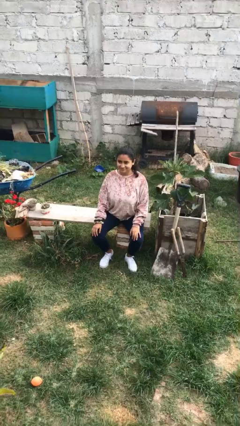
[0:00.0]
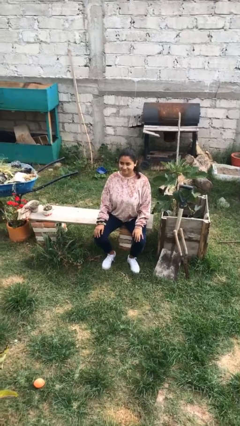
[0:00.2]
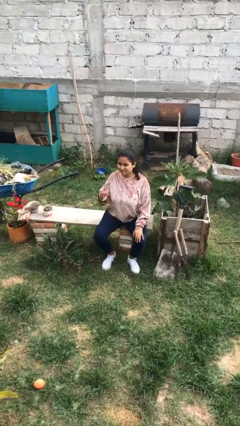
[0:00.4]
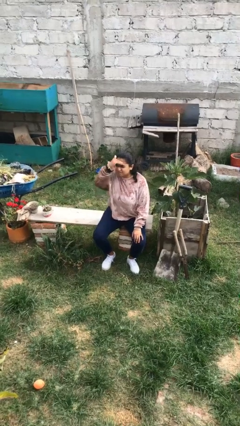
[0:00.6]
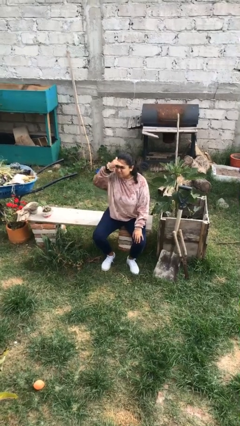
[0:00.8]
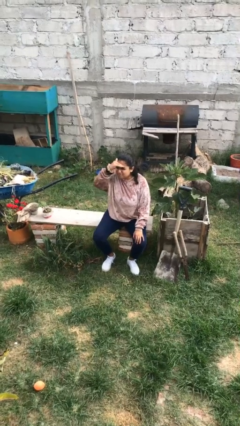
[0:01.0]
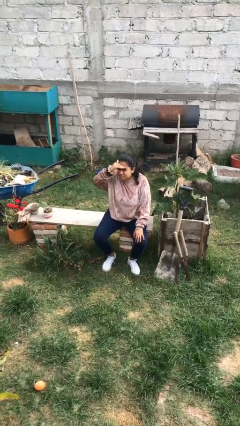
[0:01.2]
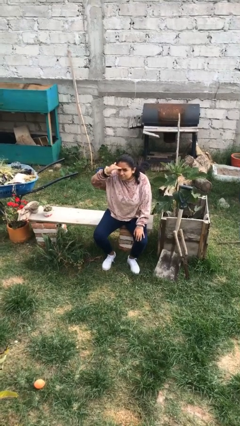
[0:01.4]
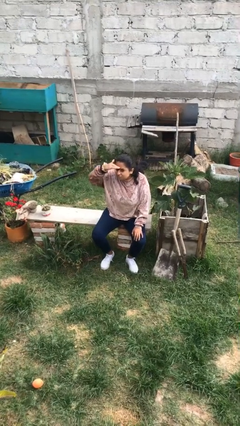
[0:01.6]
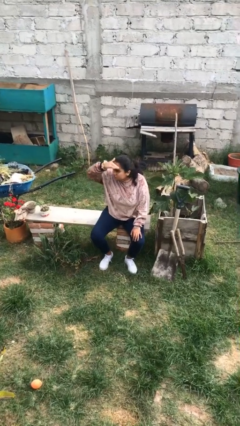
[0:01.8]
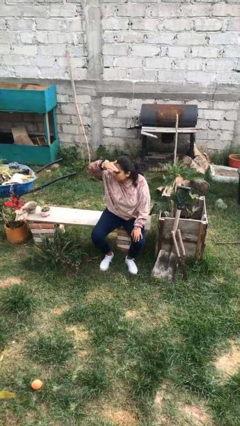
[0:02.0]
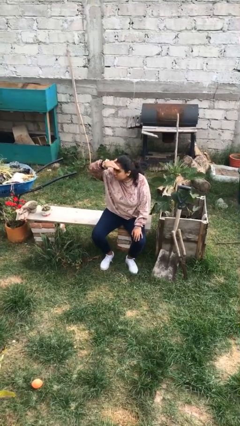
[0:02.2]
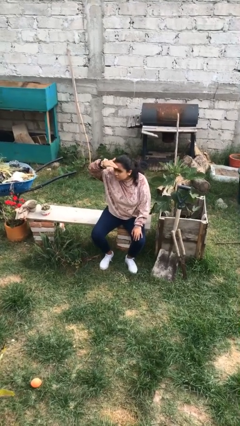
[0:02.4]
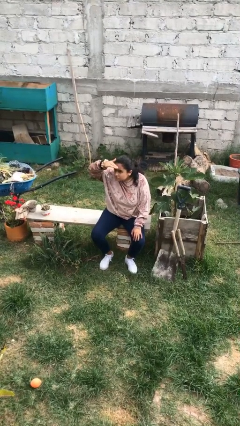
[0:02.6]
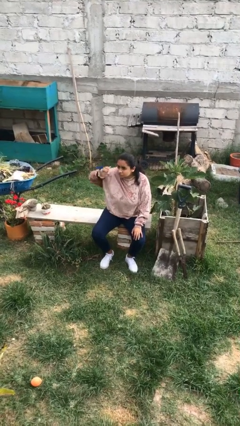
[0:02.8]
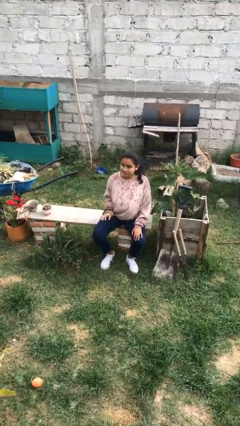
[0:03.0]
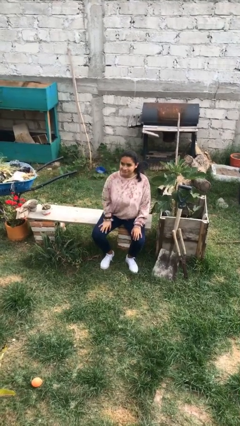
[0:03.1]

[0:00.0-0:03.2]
person shades eyes

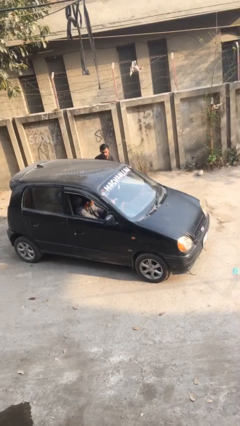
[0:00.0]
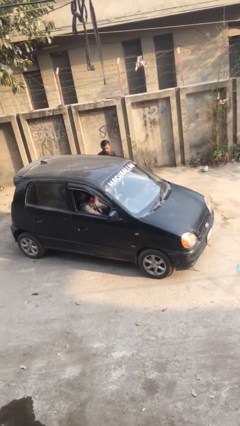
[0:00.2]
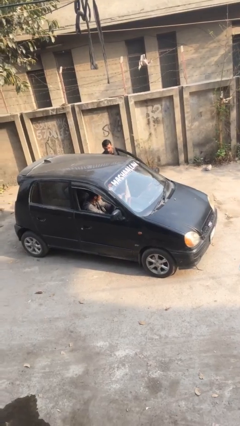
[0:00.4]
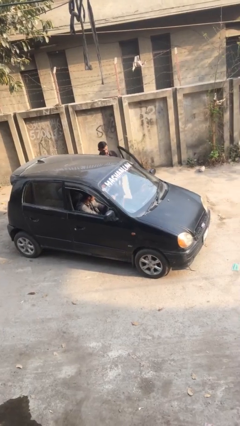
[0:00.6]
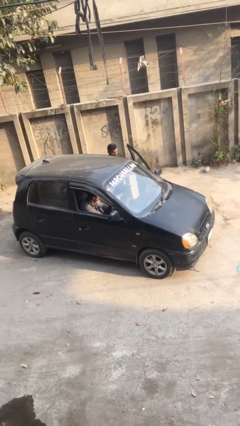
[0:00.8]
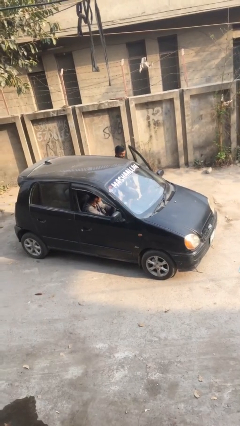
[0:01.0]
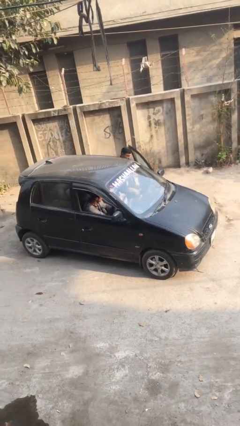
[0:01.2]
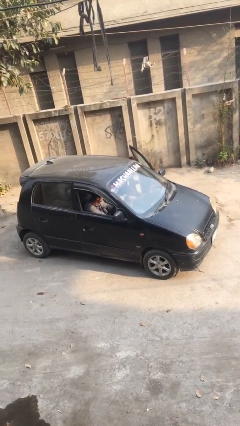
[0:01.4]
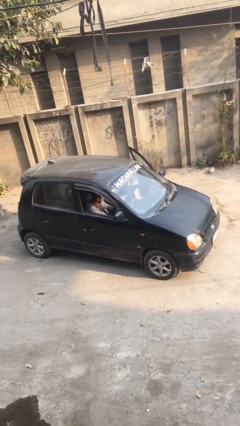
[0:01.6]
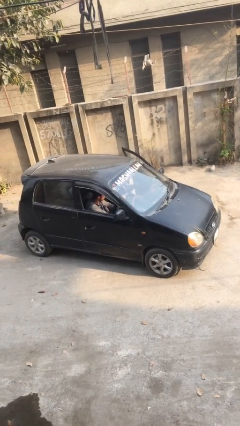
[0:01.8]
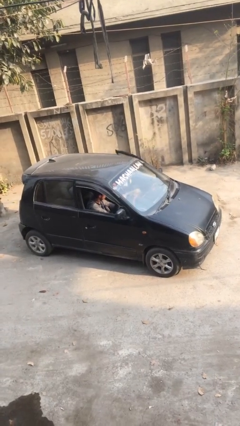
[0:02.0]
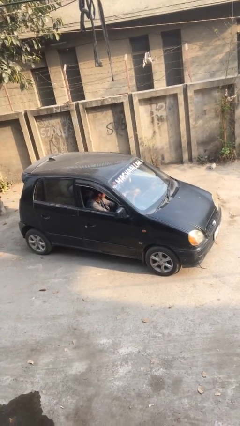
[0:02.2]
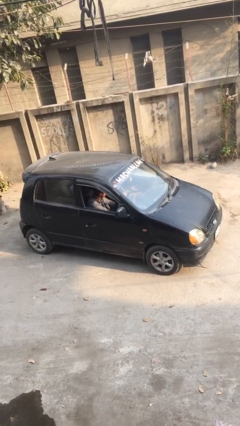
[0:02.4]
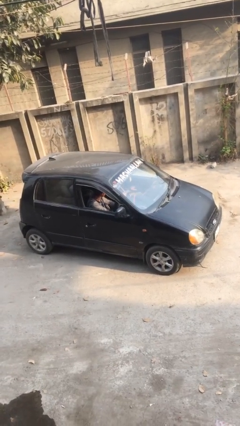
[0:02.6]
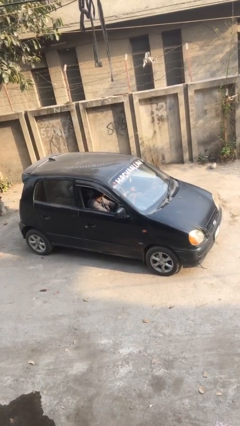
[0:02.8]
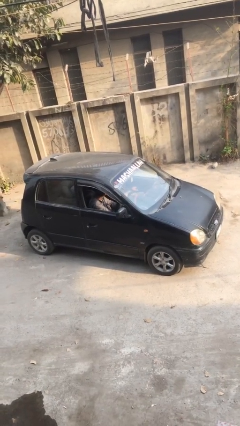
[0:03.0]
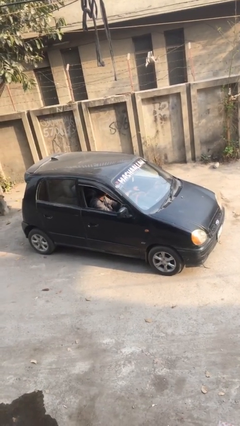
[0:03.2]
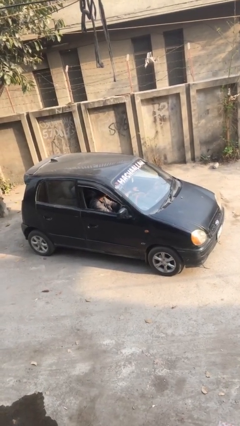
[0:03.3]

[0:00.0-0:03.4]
car picks up person

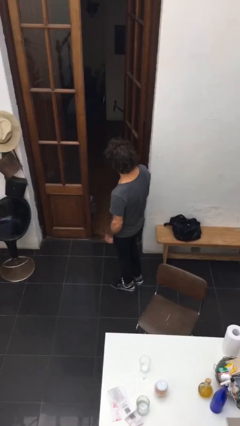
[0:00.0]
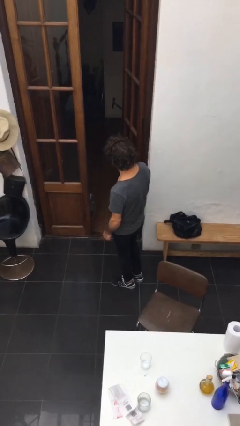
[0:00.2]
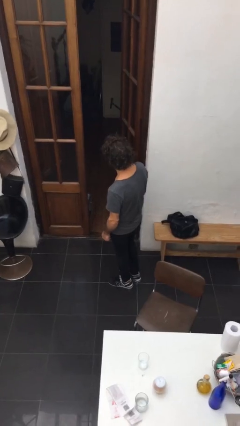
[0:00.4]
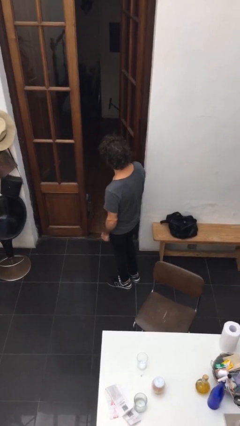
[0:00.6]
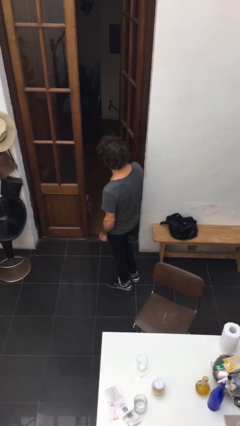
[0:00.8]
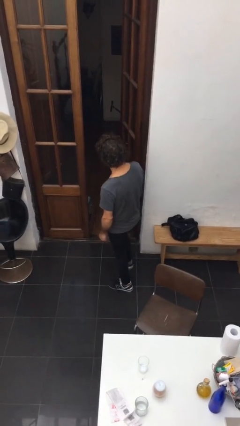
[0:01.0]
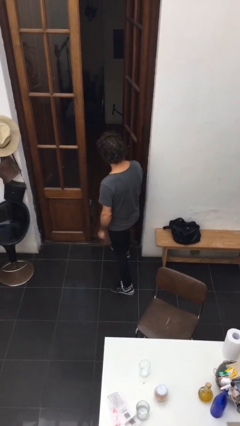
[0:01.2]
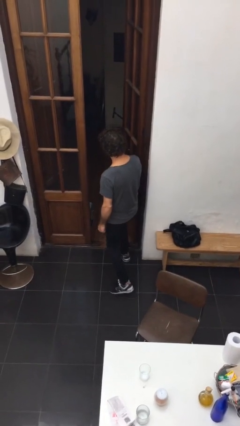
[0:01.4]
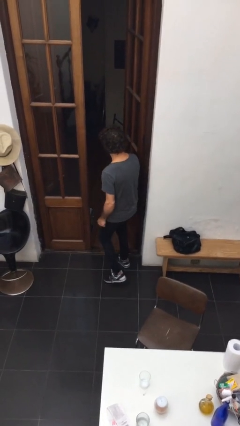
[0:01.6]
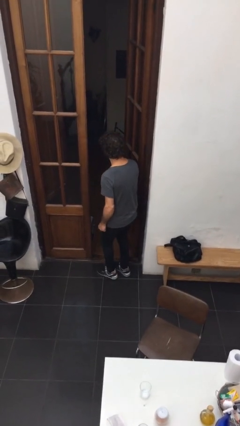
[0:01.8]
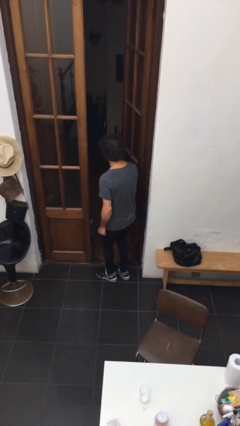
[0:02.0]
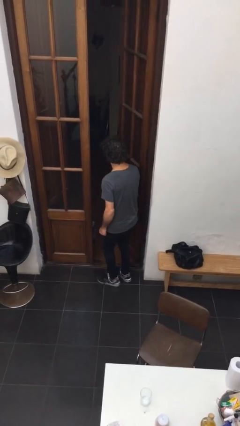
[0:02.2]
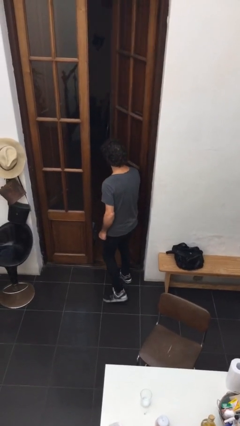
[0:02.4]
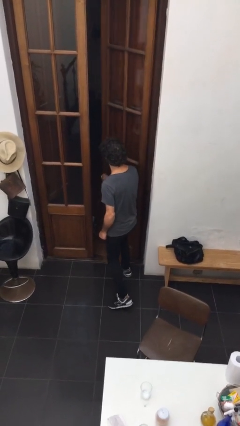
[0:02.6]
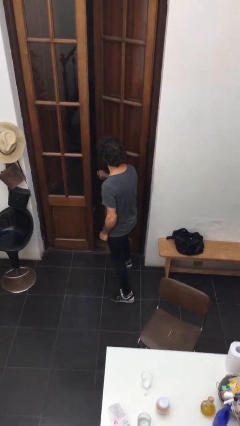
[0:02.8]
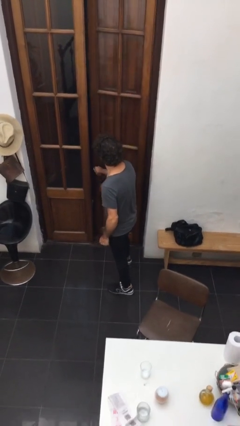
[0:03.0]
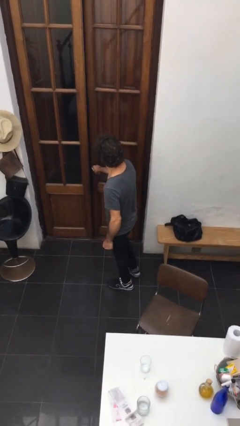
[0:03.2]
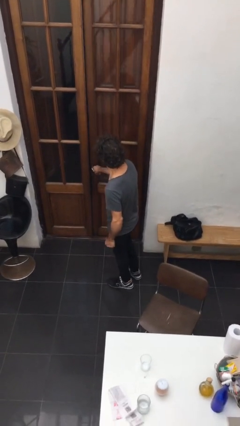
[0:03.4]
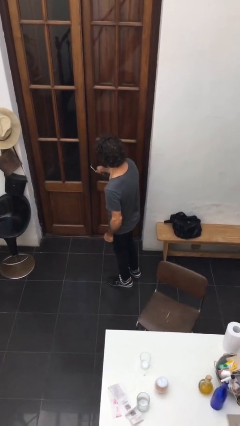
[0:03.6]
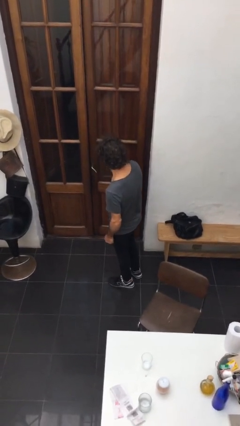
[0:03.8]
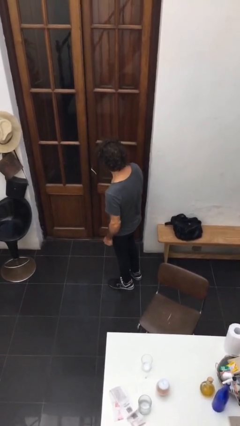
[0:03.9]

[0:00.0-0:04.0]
person closes facility door

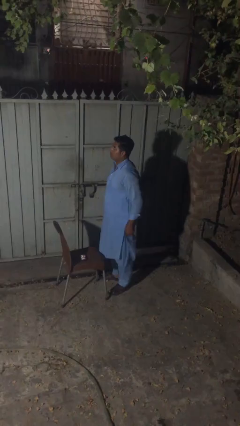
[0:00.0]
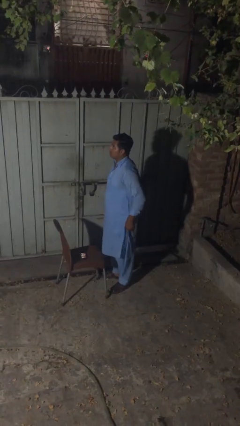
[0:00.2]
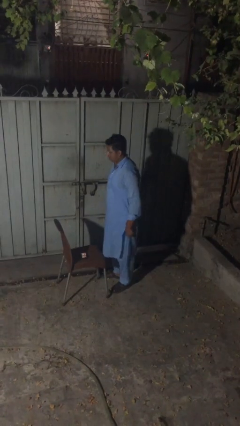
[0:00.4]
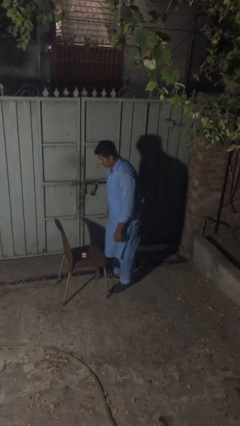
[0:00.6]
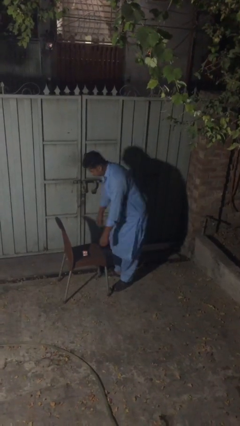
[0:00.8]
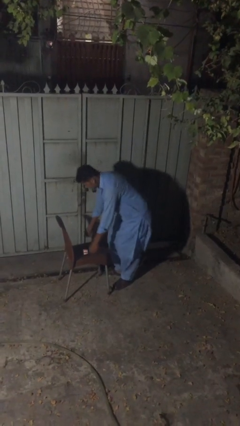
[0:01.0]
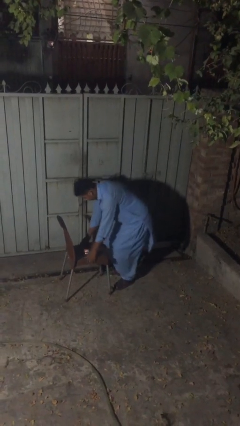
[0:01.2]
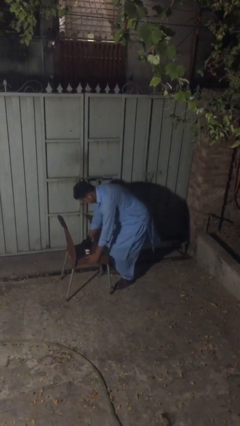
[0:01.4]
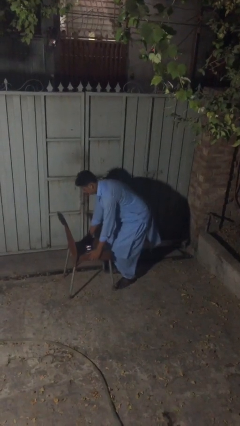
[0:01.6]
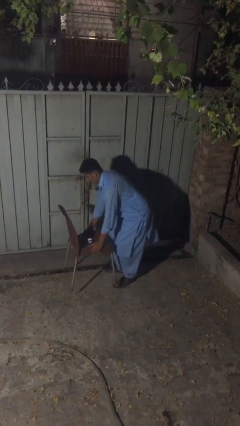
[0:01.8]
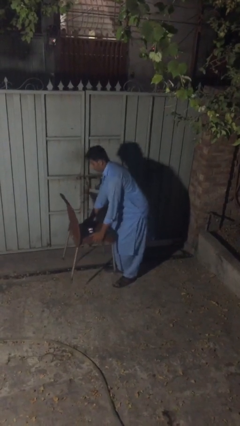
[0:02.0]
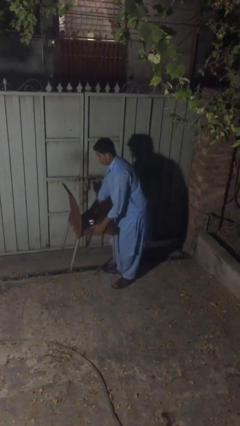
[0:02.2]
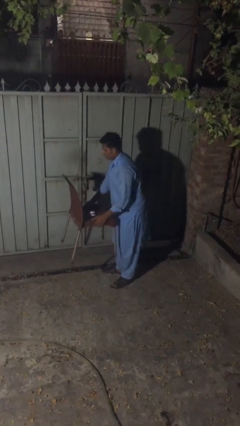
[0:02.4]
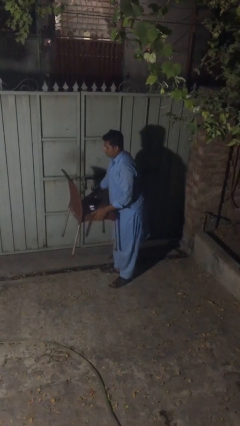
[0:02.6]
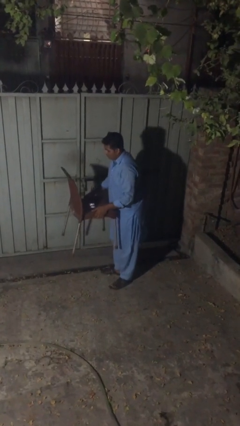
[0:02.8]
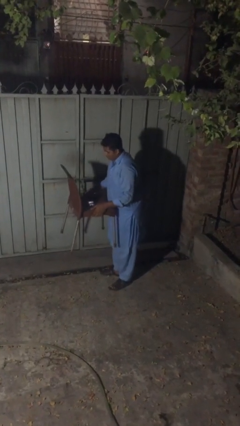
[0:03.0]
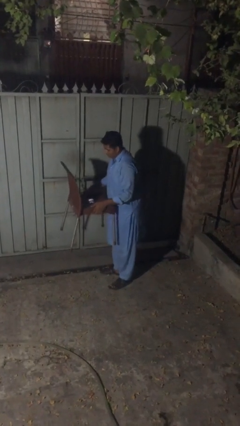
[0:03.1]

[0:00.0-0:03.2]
person picks up object from floor

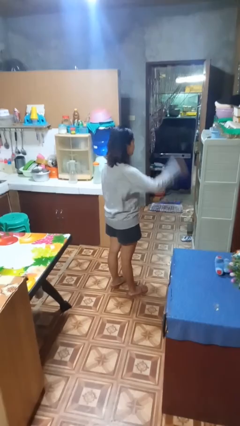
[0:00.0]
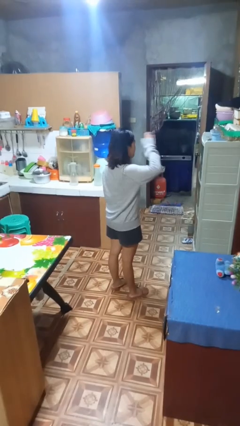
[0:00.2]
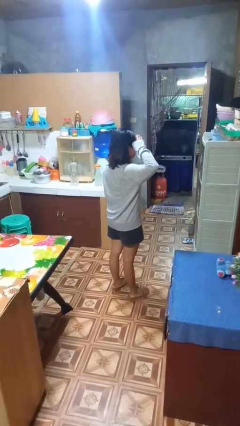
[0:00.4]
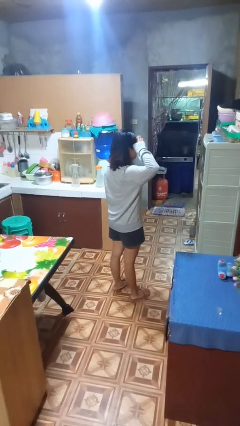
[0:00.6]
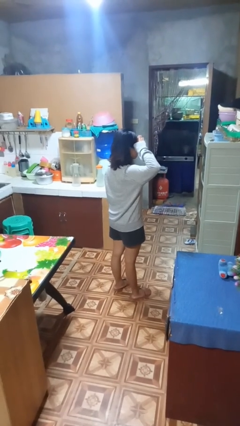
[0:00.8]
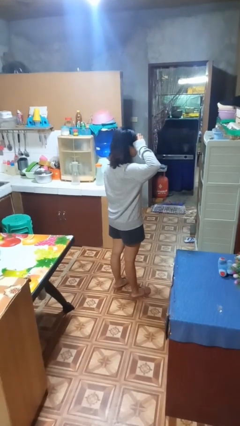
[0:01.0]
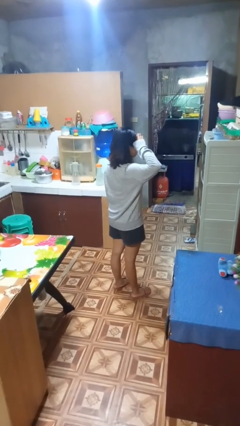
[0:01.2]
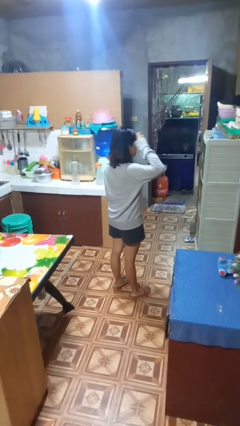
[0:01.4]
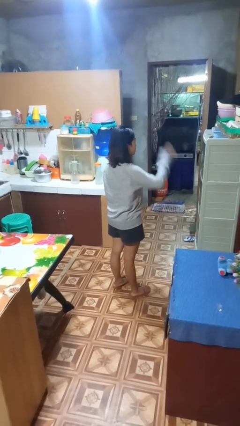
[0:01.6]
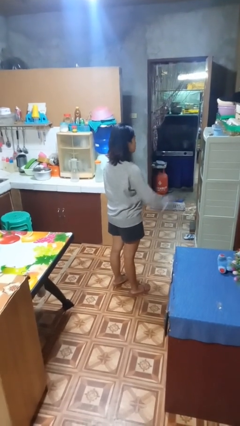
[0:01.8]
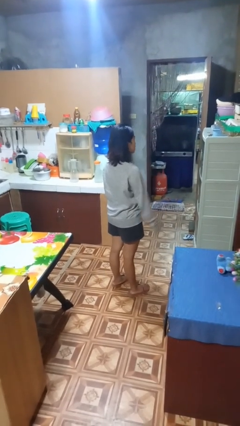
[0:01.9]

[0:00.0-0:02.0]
person salutes

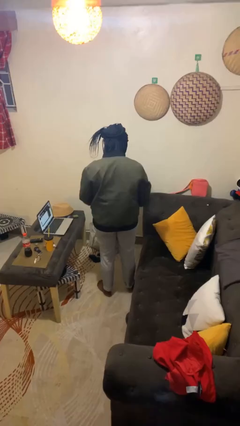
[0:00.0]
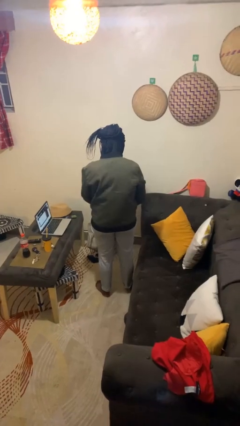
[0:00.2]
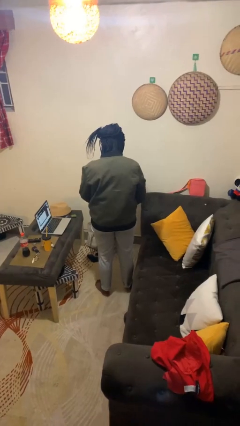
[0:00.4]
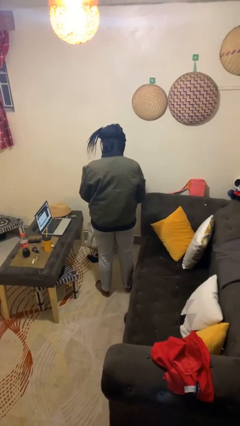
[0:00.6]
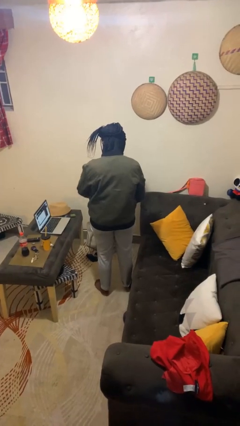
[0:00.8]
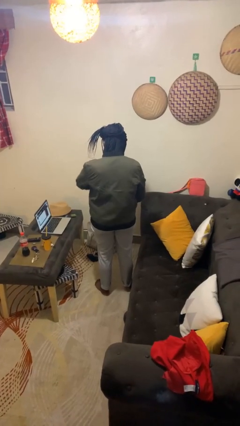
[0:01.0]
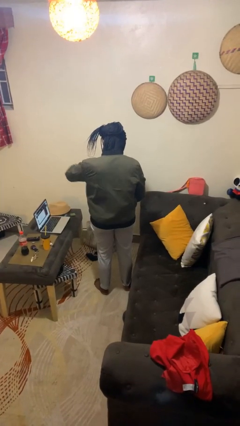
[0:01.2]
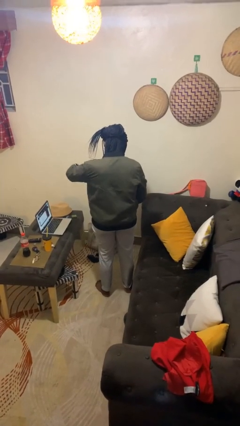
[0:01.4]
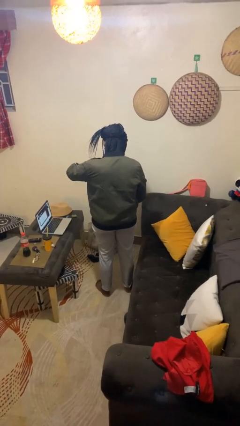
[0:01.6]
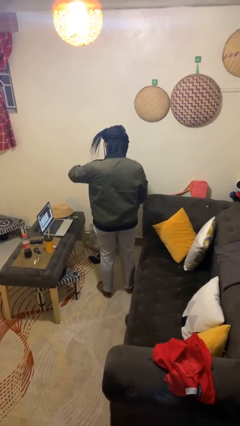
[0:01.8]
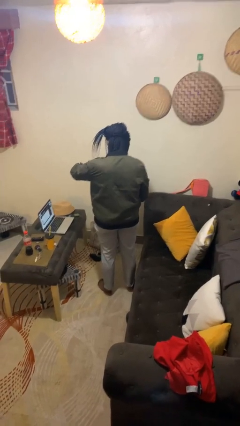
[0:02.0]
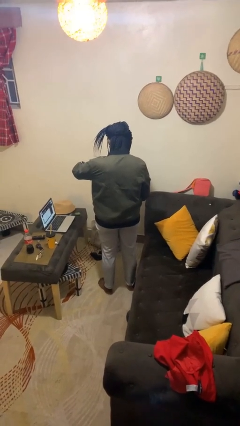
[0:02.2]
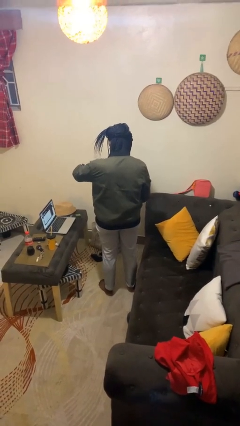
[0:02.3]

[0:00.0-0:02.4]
person zips up jacket
